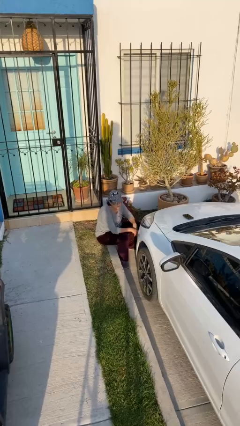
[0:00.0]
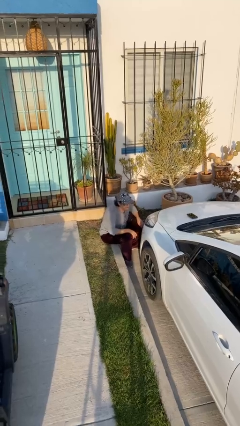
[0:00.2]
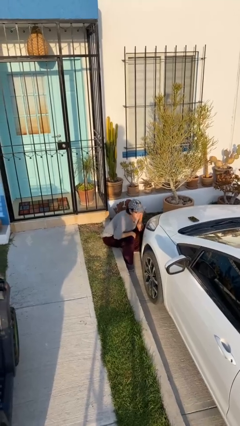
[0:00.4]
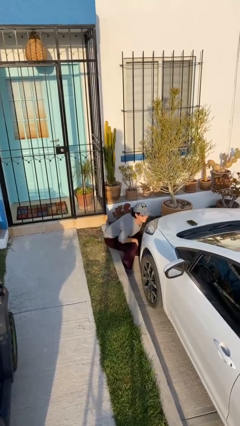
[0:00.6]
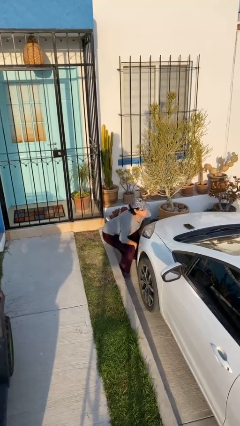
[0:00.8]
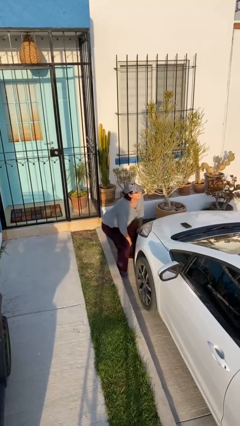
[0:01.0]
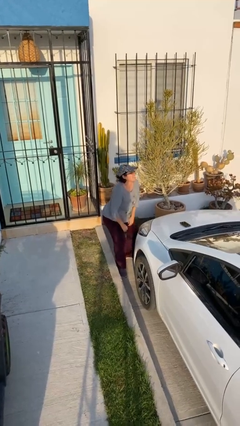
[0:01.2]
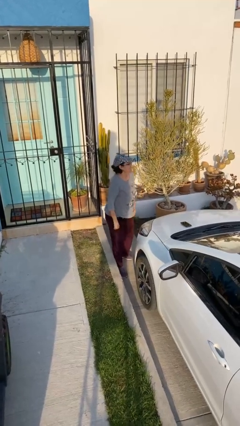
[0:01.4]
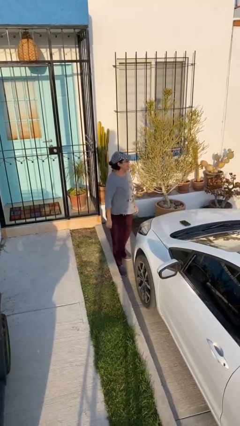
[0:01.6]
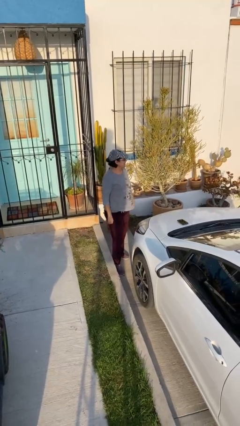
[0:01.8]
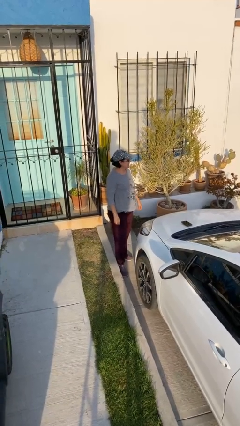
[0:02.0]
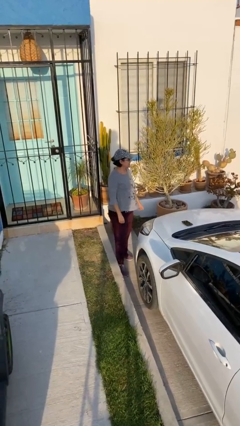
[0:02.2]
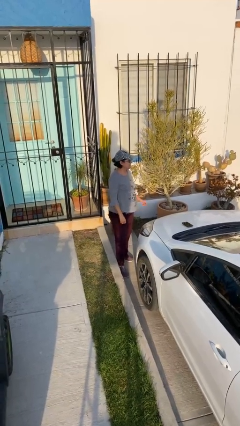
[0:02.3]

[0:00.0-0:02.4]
person stands up

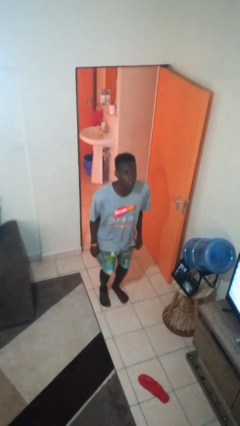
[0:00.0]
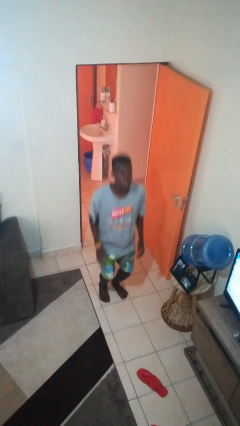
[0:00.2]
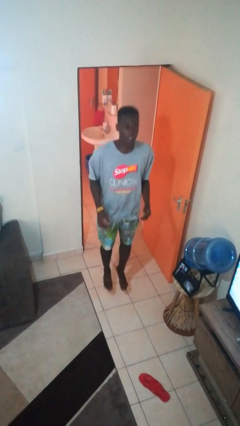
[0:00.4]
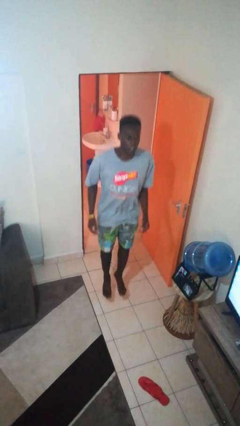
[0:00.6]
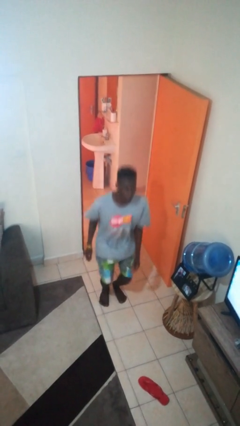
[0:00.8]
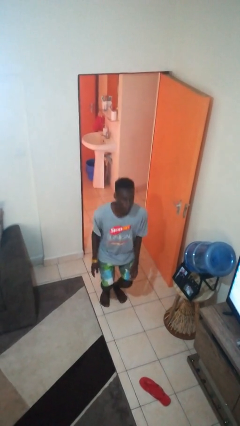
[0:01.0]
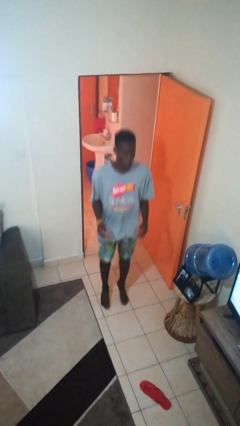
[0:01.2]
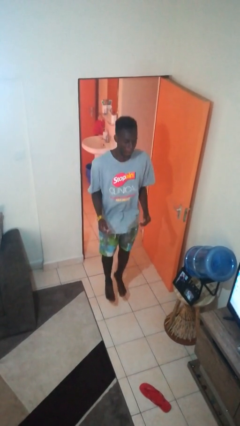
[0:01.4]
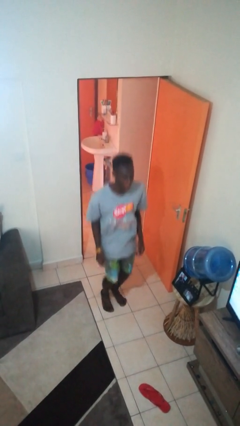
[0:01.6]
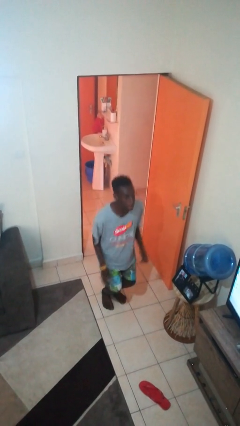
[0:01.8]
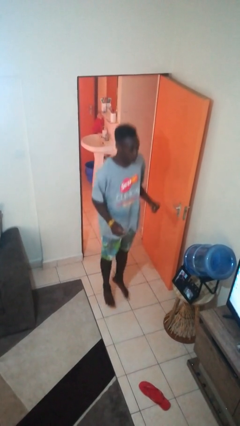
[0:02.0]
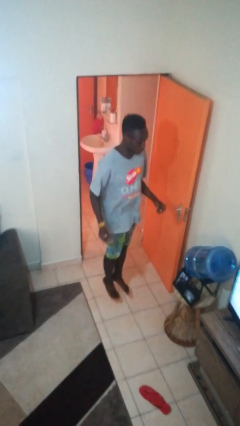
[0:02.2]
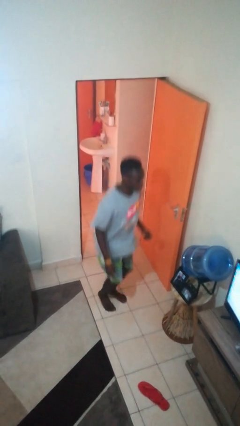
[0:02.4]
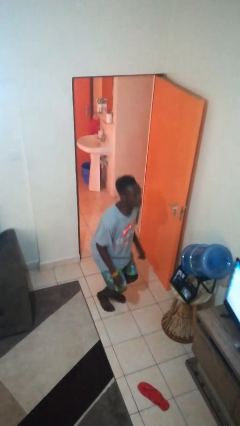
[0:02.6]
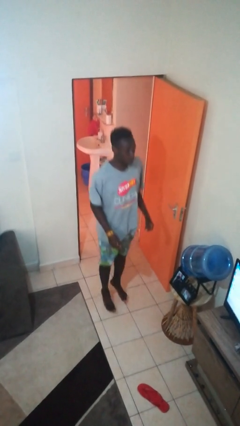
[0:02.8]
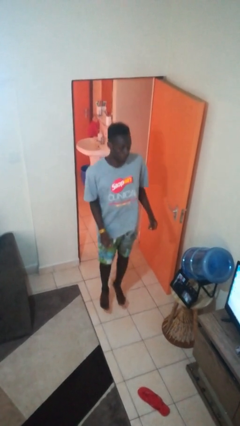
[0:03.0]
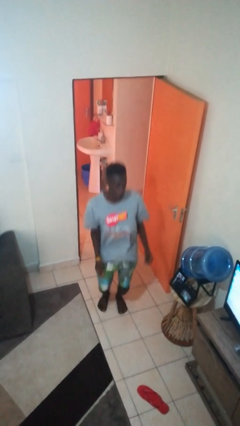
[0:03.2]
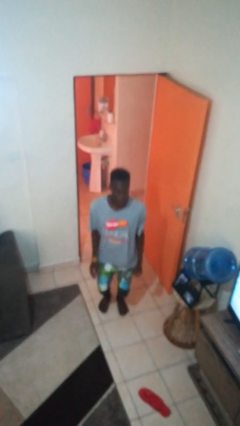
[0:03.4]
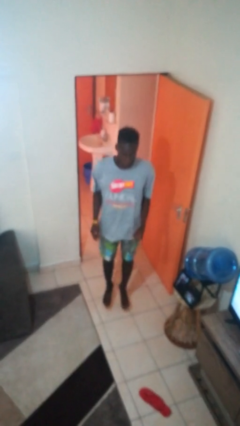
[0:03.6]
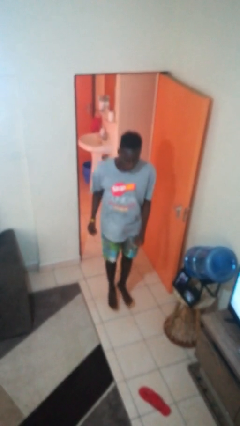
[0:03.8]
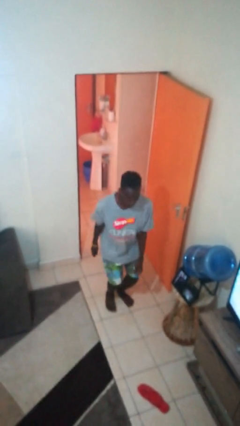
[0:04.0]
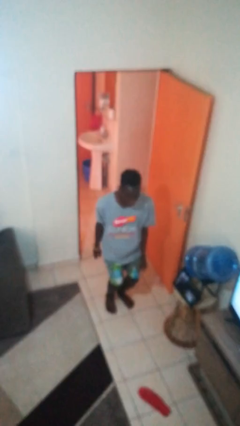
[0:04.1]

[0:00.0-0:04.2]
person jumps

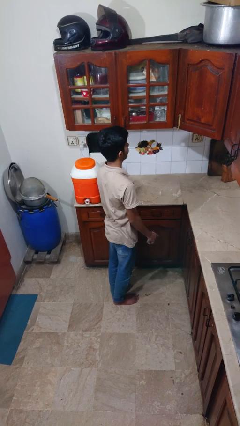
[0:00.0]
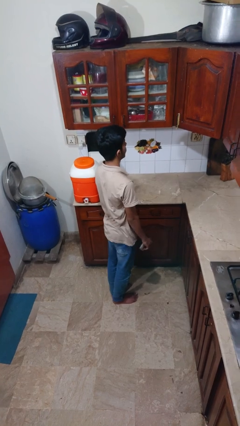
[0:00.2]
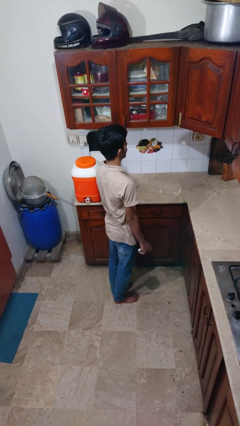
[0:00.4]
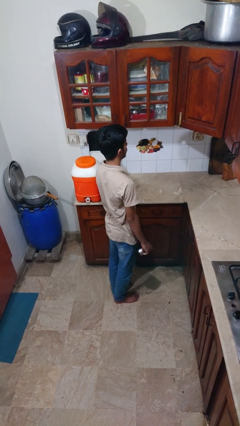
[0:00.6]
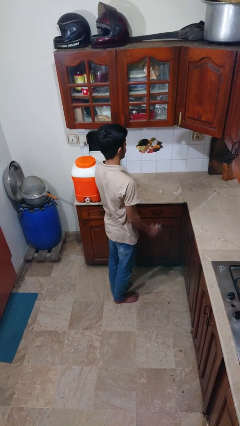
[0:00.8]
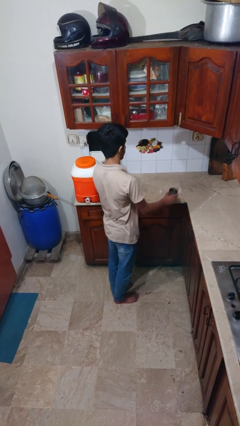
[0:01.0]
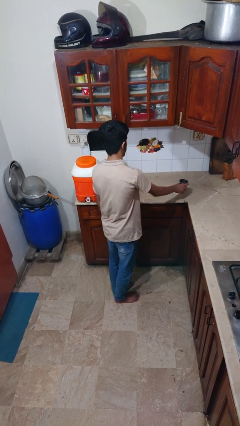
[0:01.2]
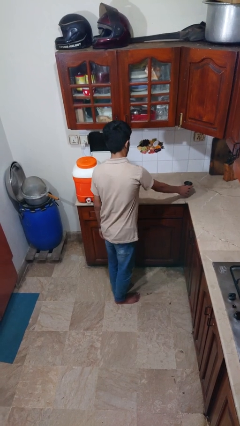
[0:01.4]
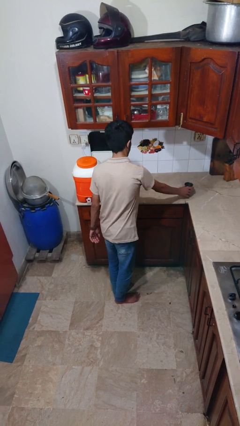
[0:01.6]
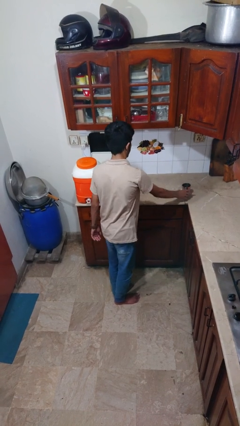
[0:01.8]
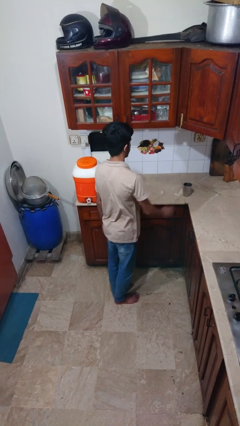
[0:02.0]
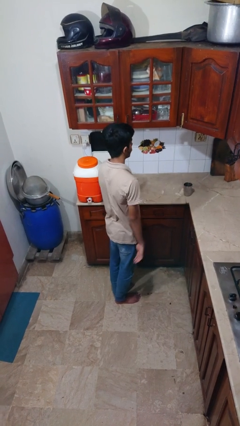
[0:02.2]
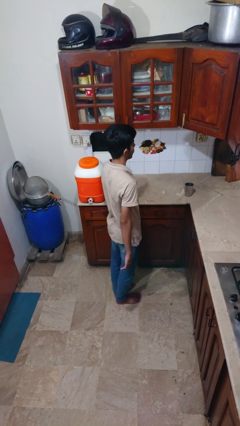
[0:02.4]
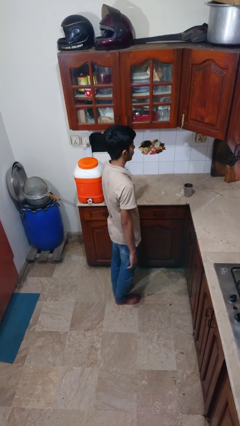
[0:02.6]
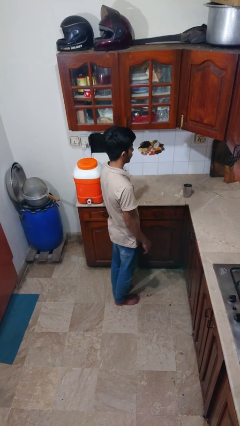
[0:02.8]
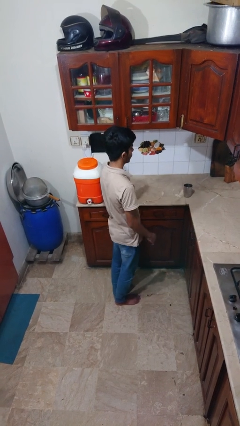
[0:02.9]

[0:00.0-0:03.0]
person puts down object on countertop

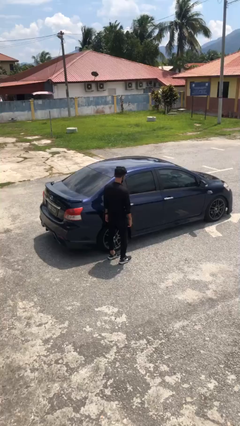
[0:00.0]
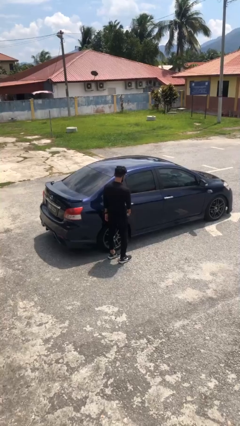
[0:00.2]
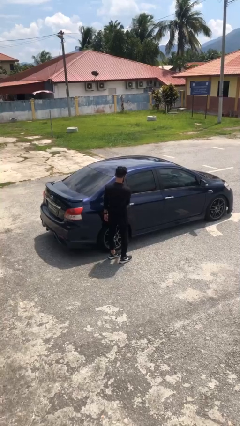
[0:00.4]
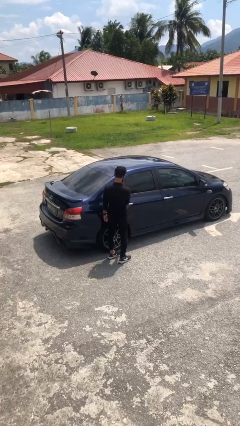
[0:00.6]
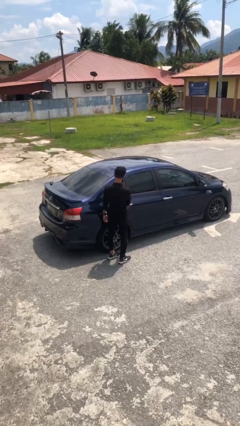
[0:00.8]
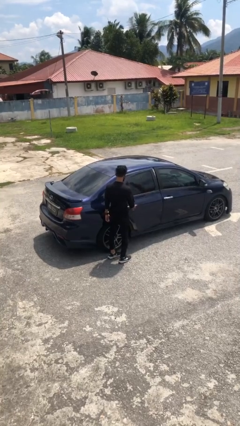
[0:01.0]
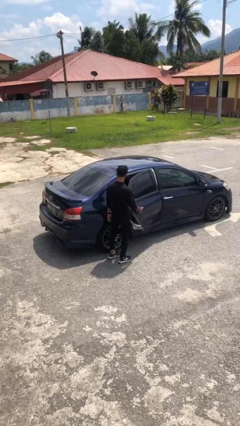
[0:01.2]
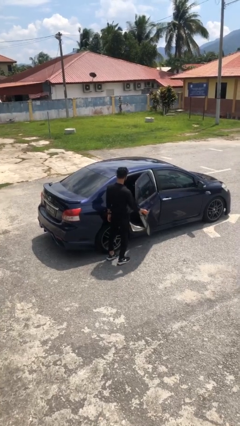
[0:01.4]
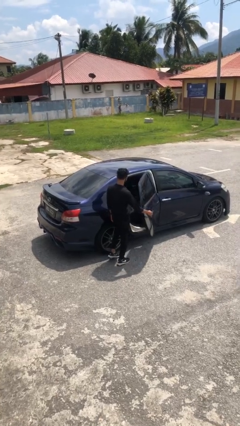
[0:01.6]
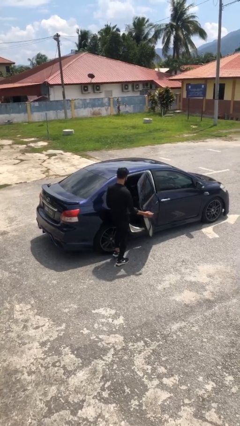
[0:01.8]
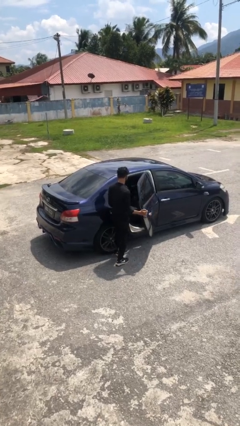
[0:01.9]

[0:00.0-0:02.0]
person opens car door

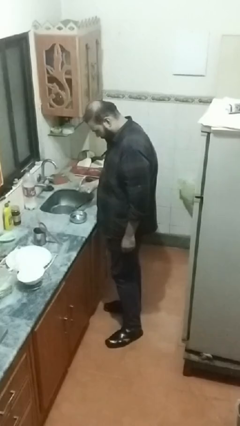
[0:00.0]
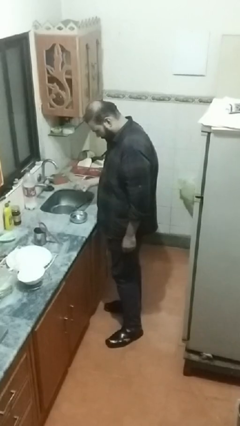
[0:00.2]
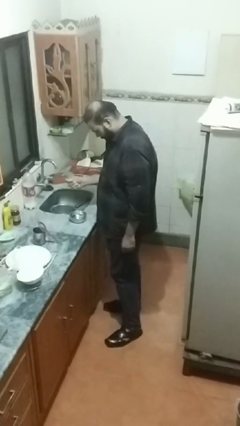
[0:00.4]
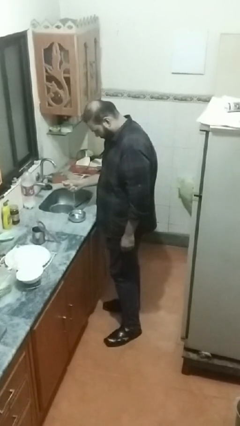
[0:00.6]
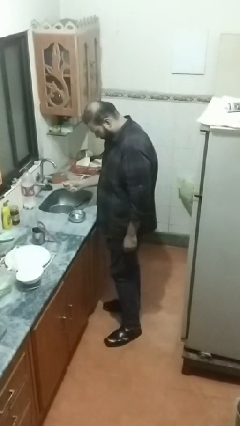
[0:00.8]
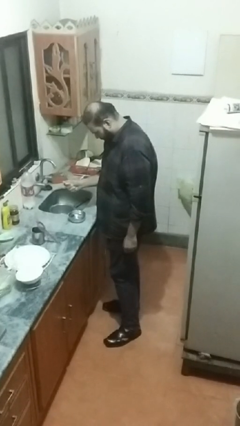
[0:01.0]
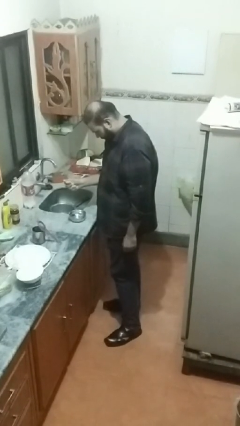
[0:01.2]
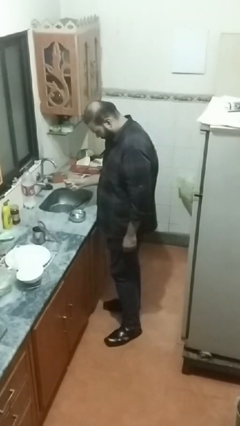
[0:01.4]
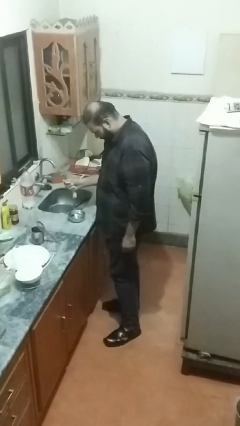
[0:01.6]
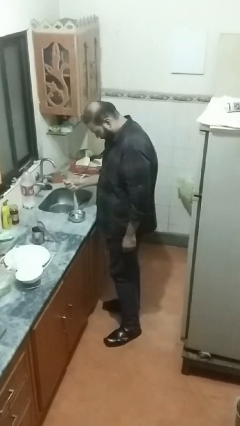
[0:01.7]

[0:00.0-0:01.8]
person pours into bowl

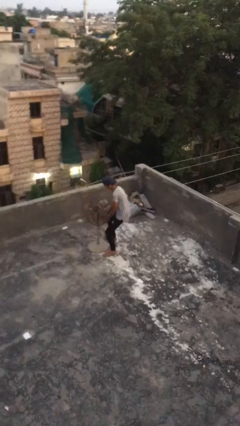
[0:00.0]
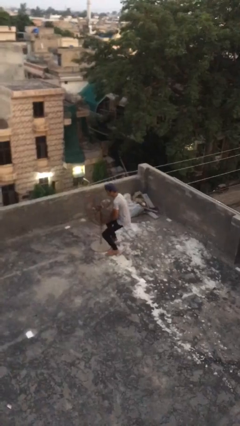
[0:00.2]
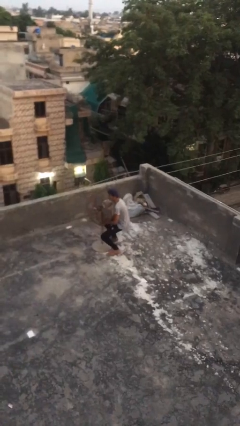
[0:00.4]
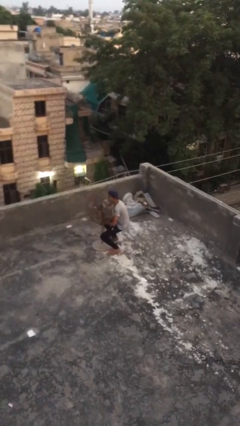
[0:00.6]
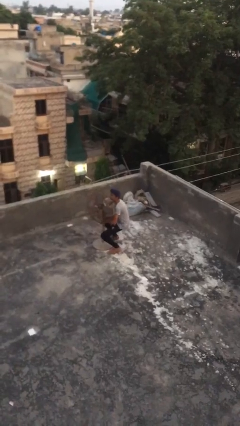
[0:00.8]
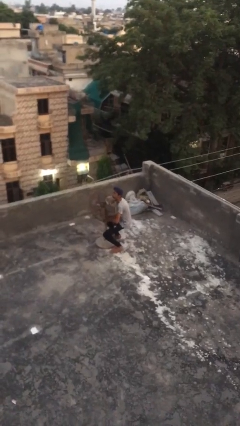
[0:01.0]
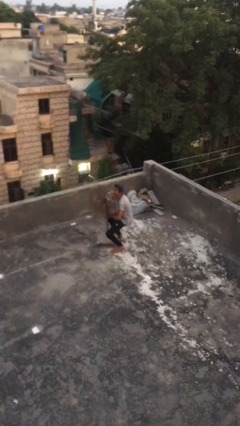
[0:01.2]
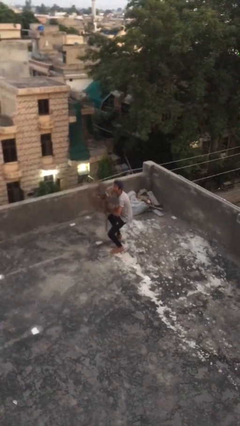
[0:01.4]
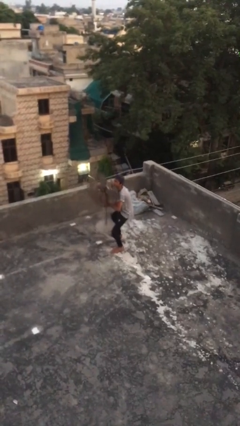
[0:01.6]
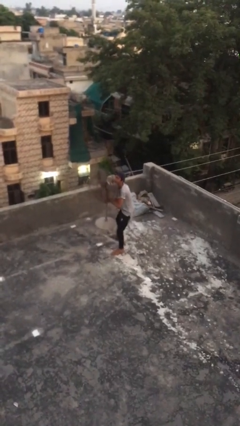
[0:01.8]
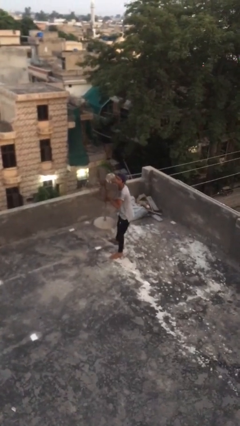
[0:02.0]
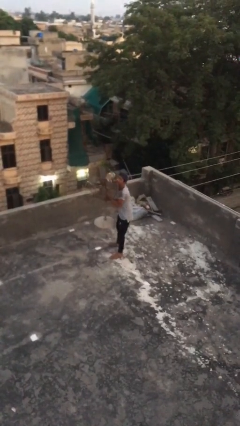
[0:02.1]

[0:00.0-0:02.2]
person picks up object from floor

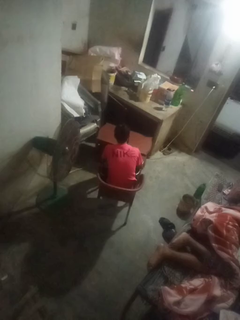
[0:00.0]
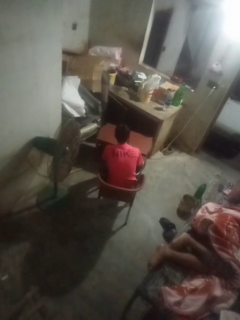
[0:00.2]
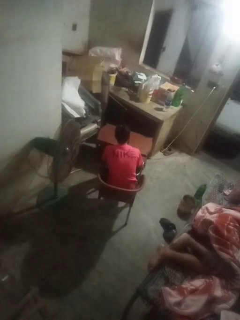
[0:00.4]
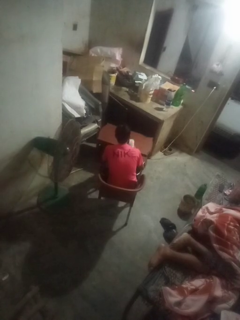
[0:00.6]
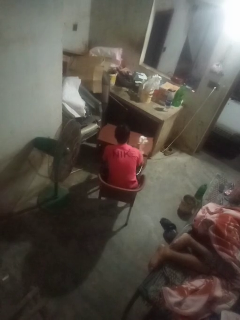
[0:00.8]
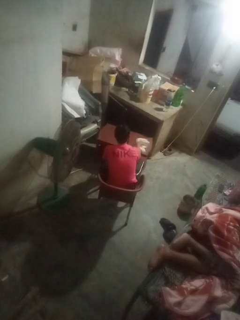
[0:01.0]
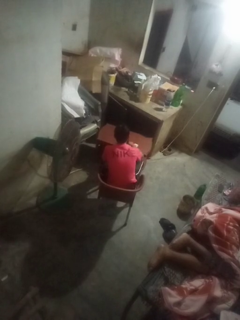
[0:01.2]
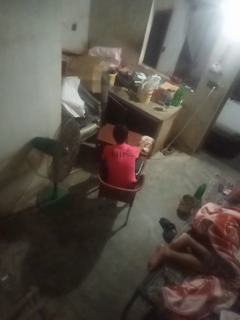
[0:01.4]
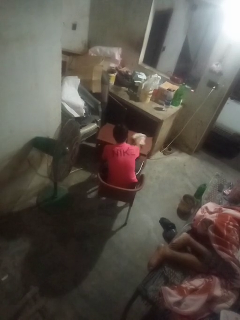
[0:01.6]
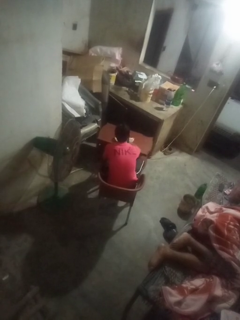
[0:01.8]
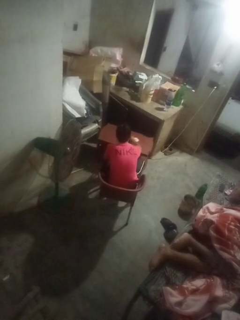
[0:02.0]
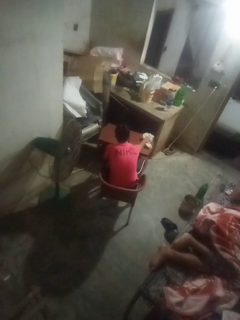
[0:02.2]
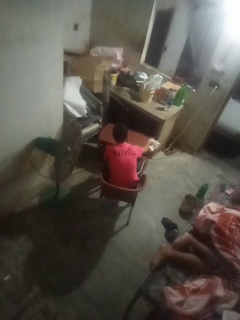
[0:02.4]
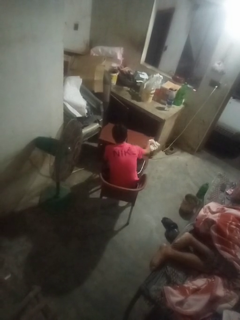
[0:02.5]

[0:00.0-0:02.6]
person cleans table with rag
